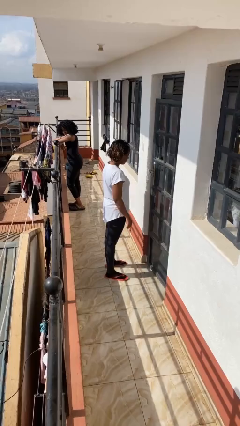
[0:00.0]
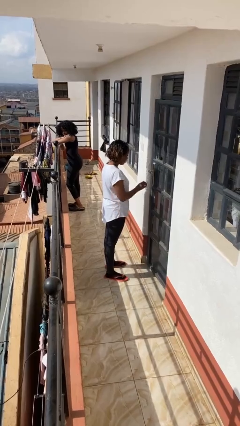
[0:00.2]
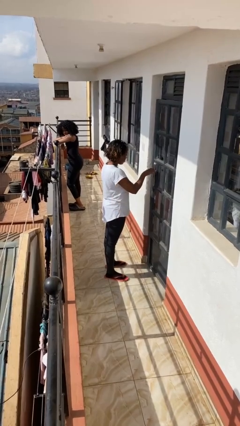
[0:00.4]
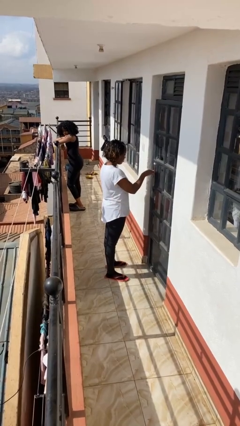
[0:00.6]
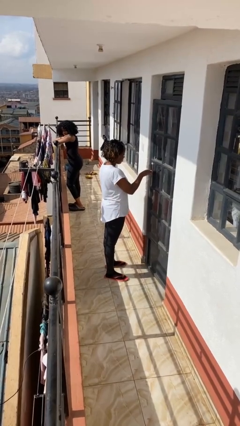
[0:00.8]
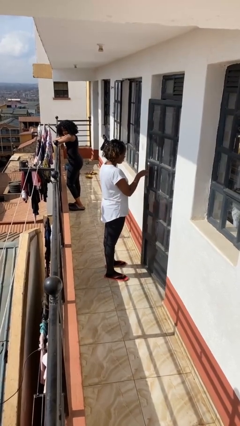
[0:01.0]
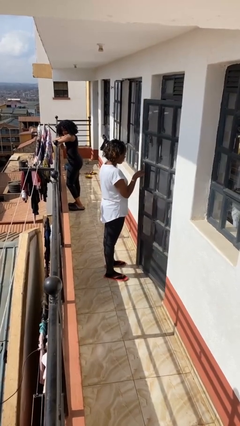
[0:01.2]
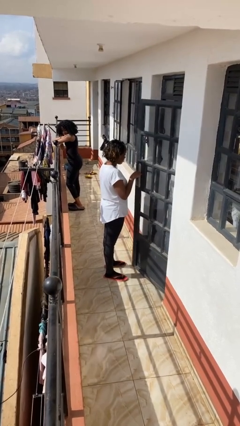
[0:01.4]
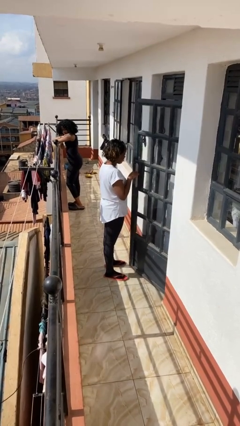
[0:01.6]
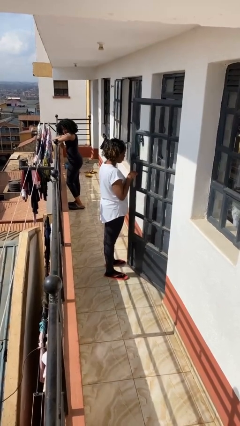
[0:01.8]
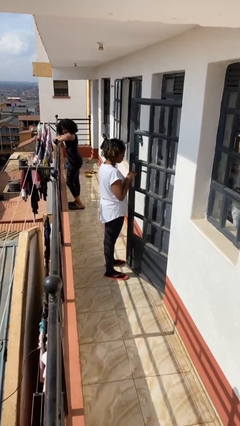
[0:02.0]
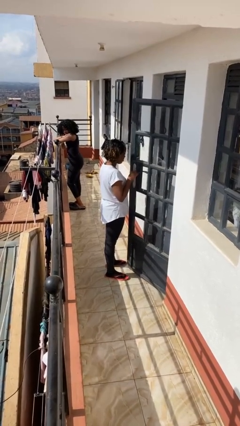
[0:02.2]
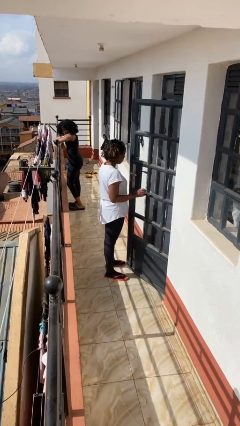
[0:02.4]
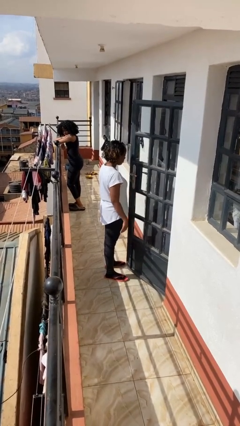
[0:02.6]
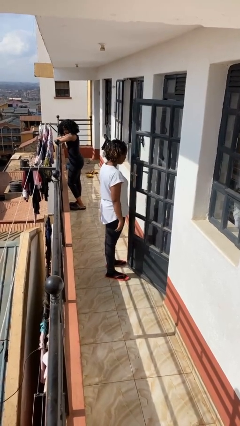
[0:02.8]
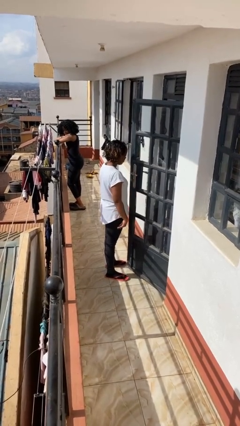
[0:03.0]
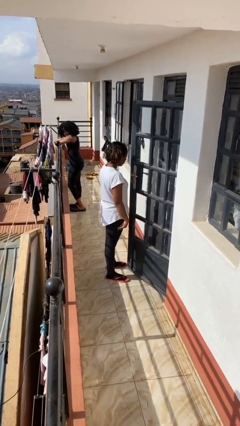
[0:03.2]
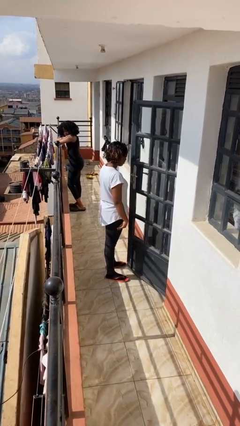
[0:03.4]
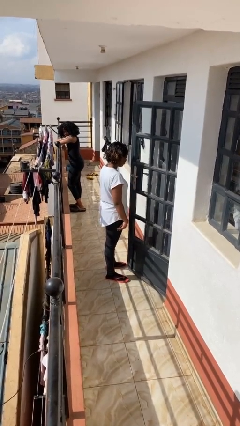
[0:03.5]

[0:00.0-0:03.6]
person opens facility door

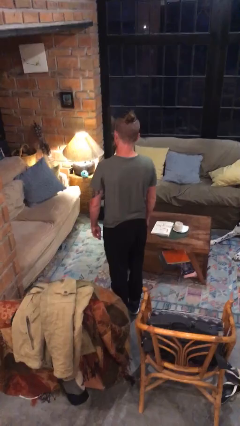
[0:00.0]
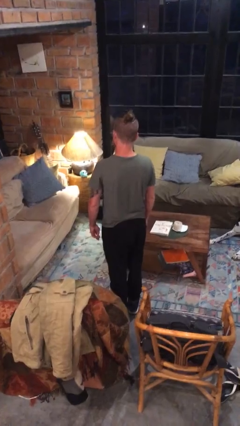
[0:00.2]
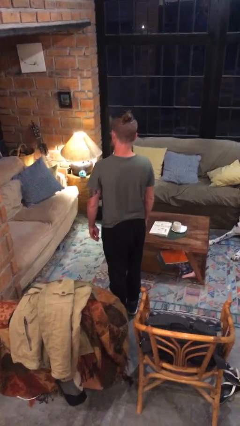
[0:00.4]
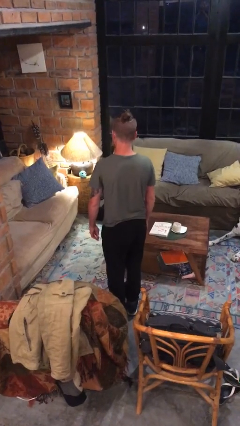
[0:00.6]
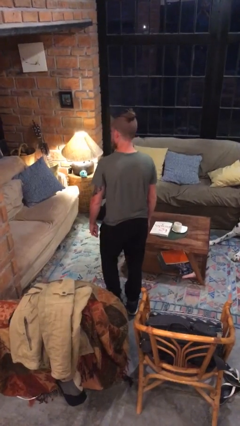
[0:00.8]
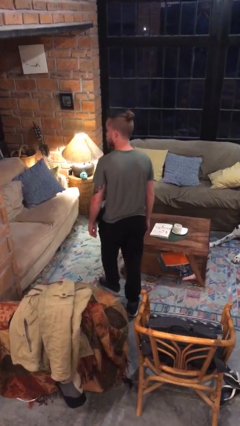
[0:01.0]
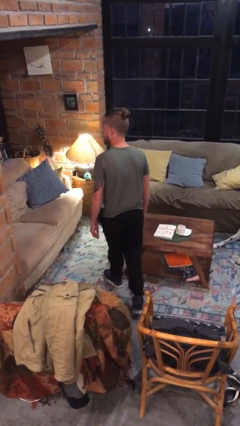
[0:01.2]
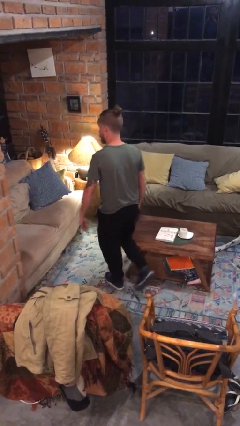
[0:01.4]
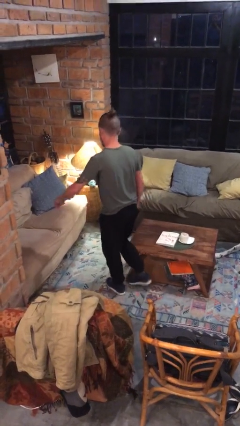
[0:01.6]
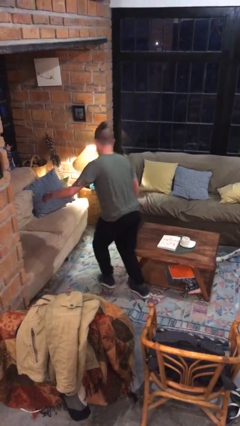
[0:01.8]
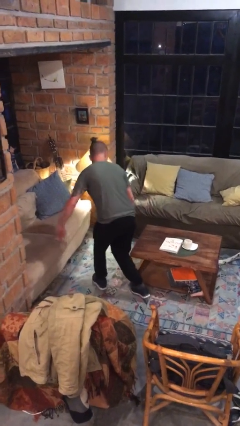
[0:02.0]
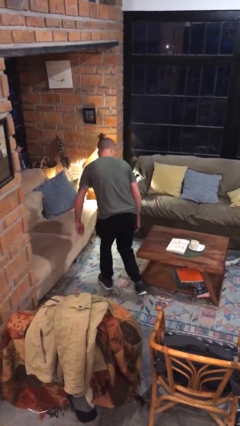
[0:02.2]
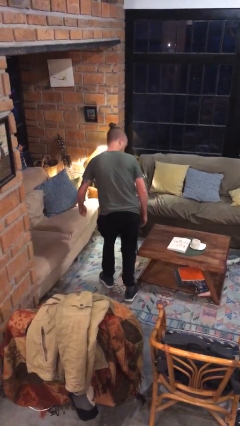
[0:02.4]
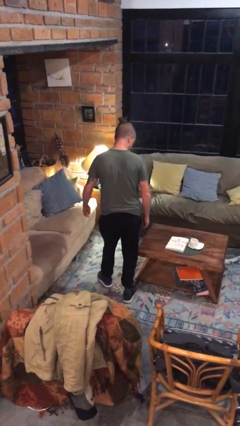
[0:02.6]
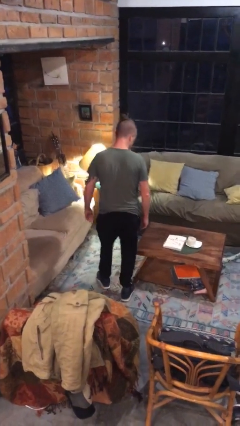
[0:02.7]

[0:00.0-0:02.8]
person bumps into table

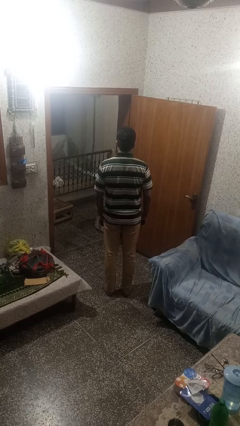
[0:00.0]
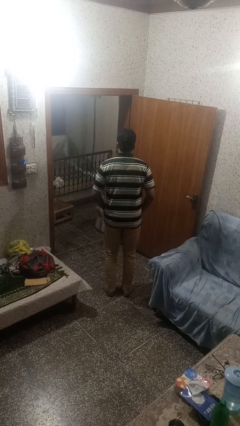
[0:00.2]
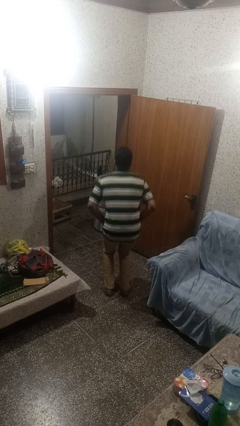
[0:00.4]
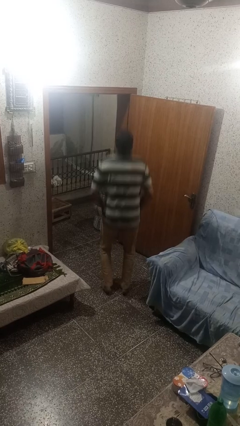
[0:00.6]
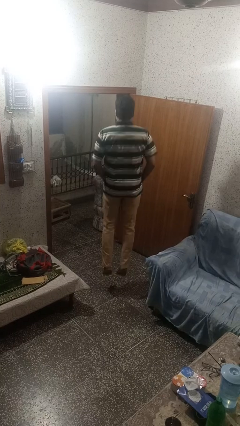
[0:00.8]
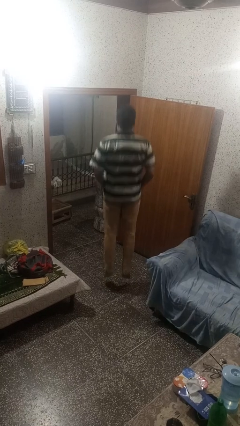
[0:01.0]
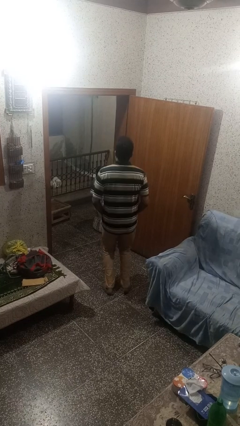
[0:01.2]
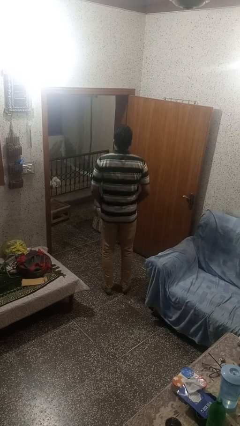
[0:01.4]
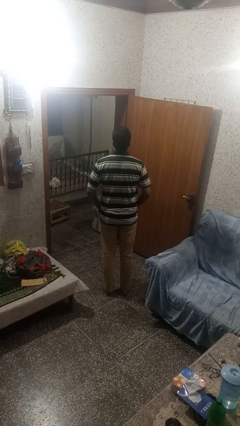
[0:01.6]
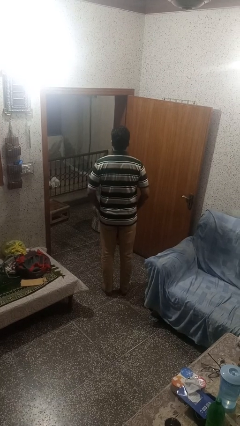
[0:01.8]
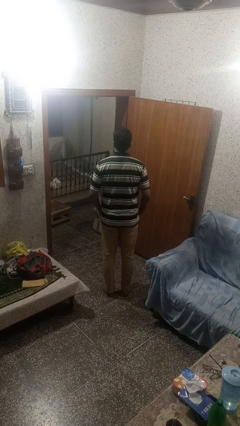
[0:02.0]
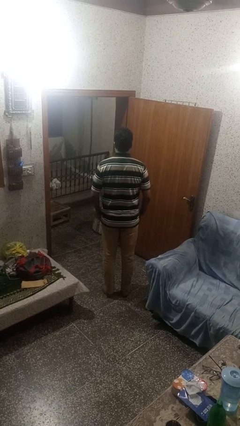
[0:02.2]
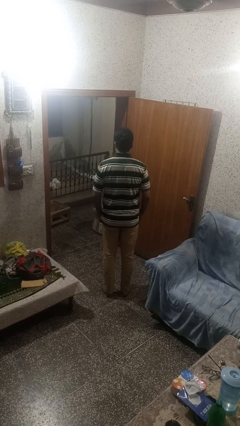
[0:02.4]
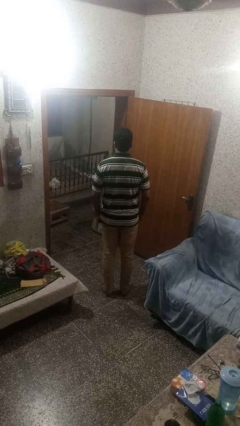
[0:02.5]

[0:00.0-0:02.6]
person jumps

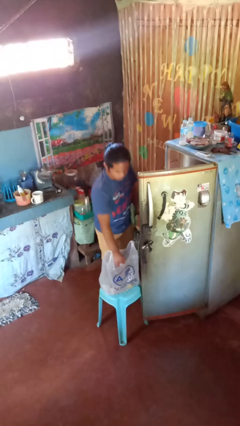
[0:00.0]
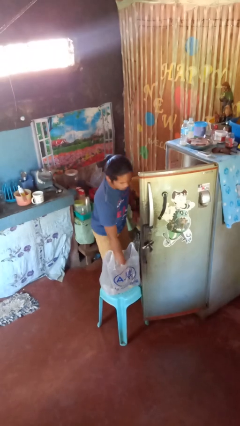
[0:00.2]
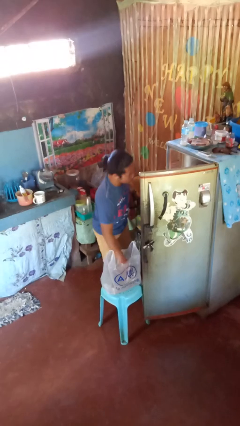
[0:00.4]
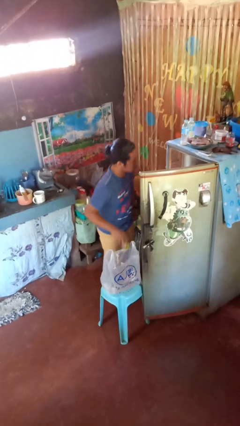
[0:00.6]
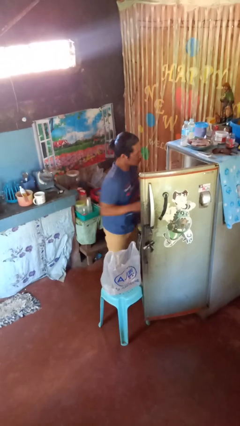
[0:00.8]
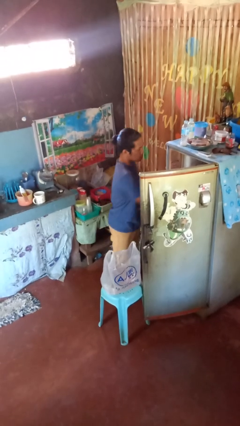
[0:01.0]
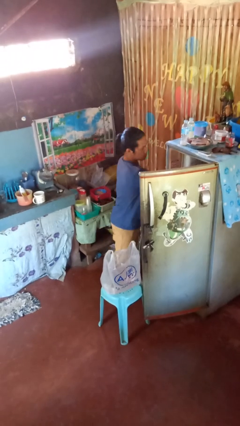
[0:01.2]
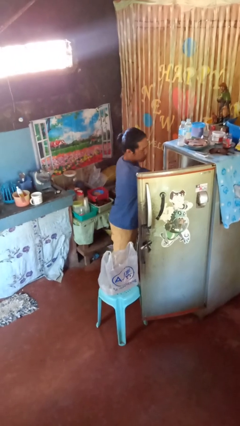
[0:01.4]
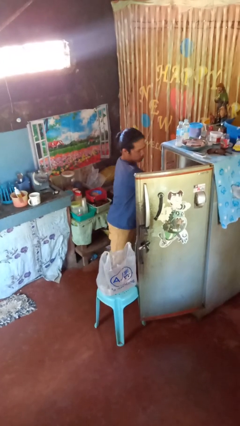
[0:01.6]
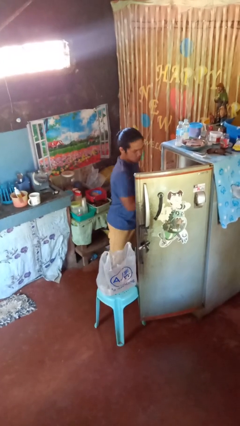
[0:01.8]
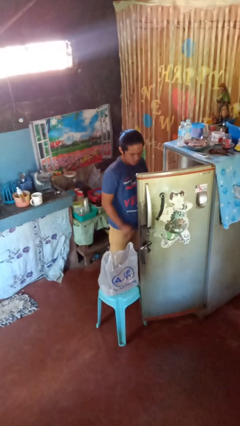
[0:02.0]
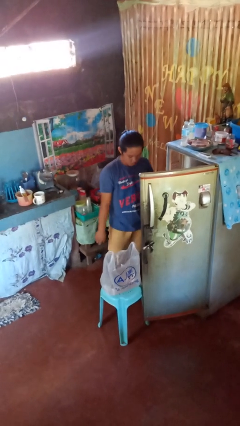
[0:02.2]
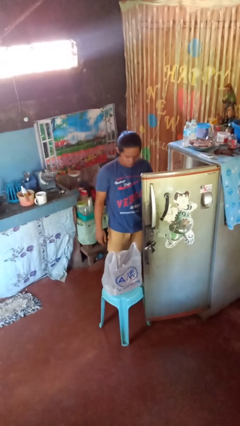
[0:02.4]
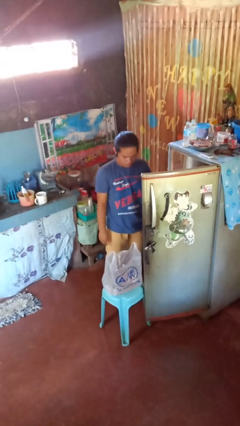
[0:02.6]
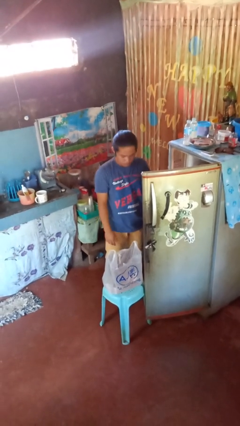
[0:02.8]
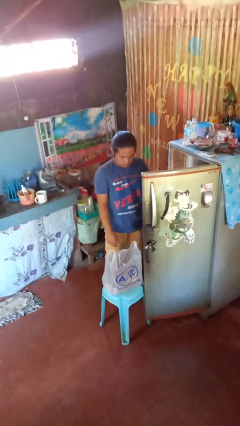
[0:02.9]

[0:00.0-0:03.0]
person loads groceries into refrigerator

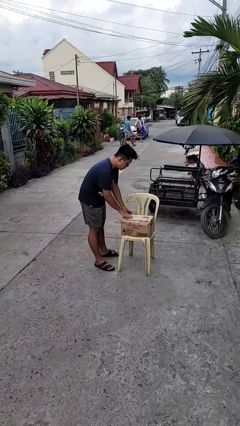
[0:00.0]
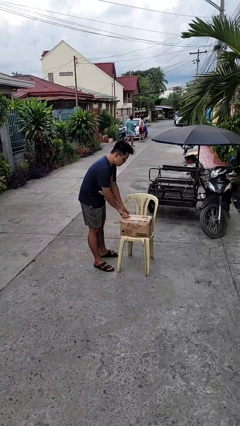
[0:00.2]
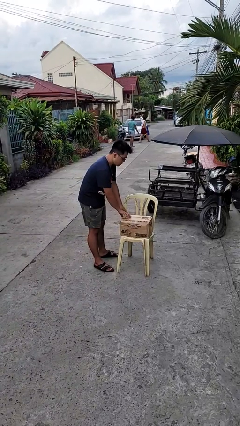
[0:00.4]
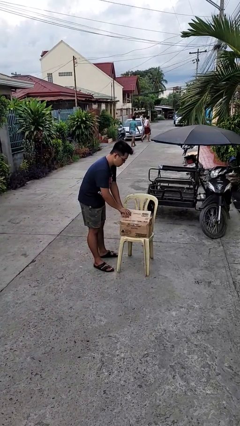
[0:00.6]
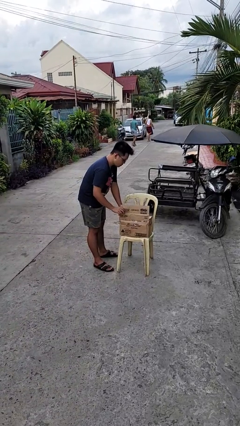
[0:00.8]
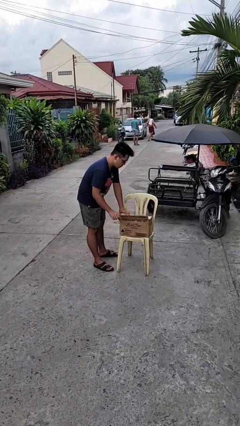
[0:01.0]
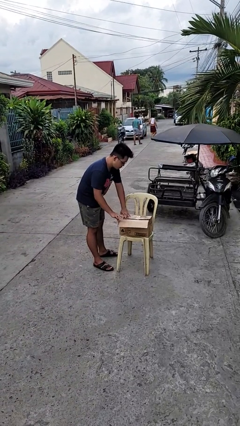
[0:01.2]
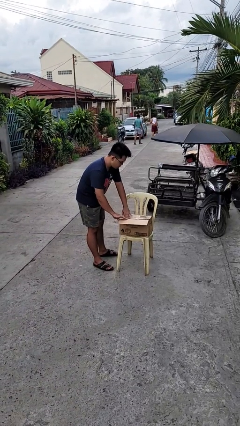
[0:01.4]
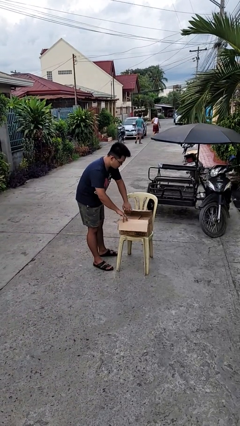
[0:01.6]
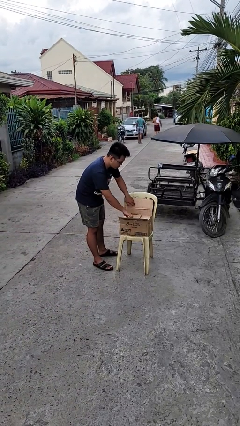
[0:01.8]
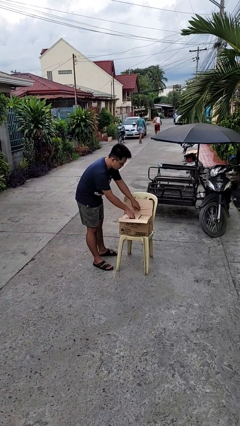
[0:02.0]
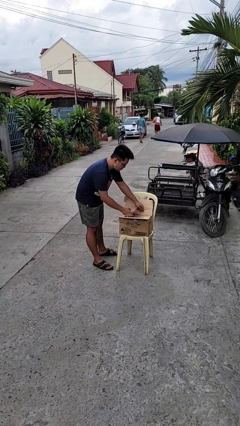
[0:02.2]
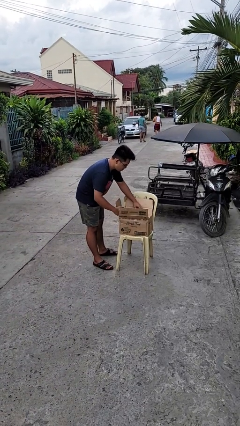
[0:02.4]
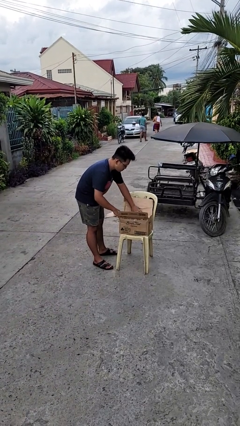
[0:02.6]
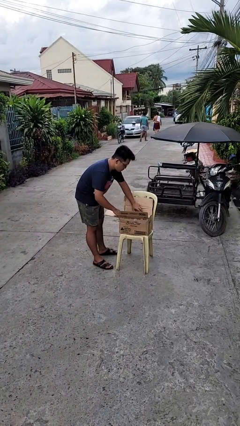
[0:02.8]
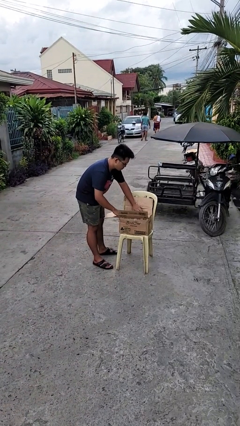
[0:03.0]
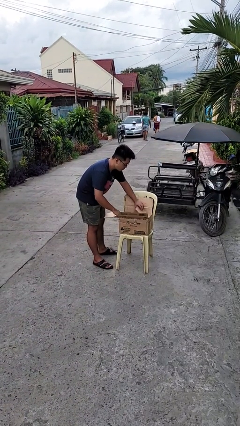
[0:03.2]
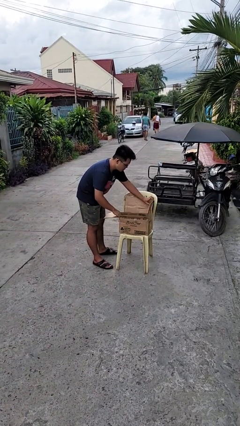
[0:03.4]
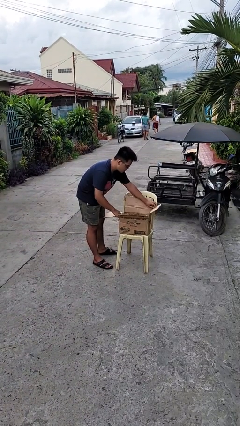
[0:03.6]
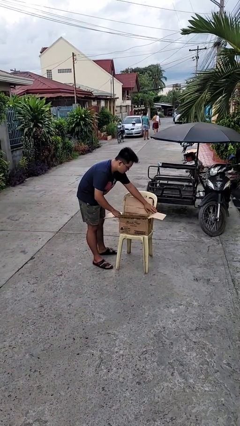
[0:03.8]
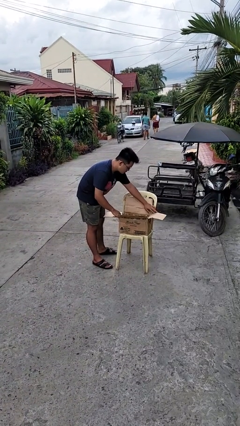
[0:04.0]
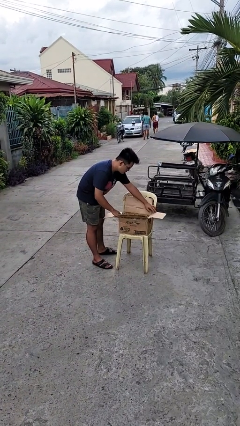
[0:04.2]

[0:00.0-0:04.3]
person opens box

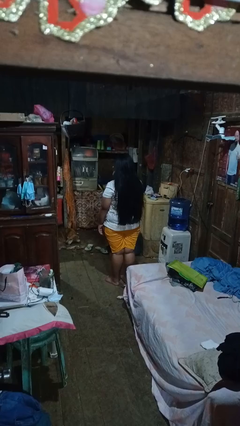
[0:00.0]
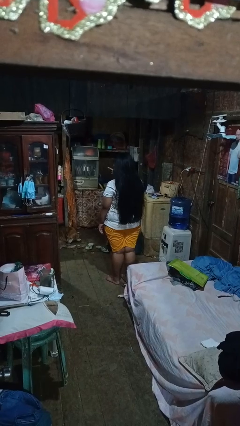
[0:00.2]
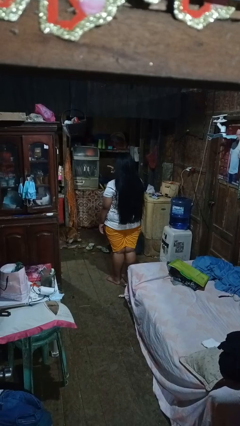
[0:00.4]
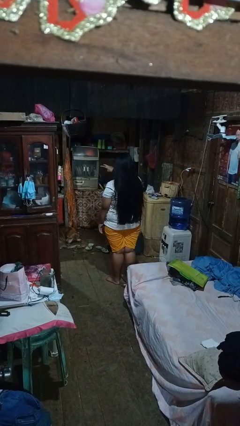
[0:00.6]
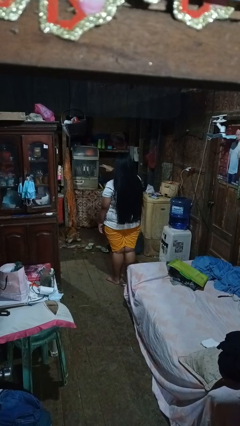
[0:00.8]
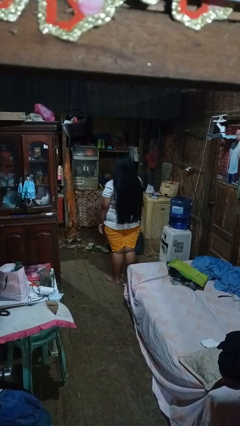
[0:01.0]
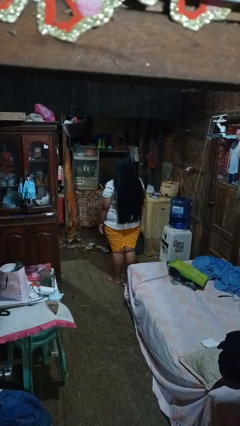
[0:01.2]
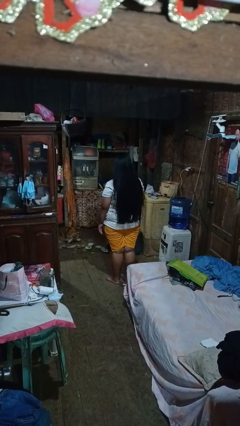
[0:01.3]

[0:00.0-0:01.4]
person gestures watch closely
